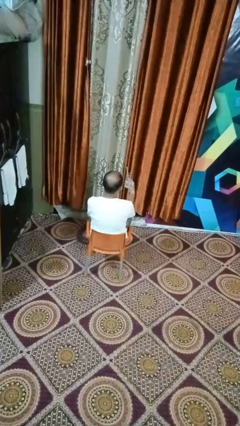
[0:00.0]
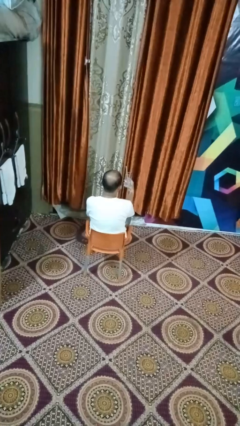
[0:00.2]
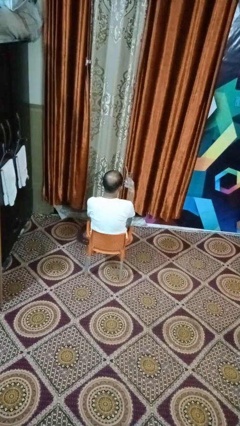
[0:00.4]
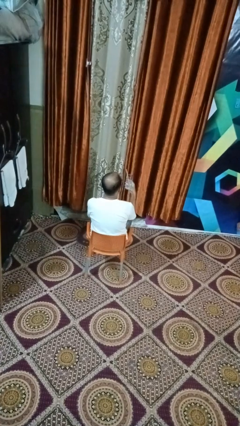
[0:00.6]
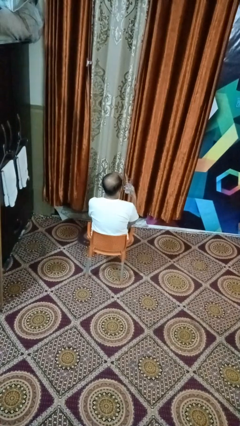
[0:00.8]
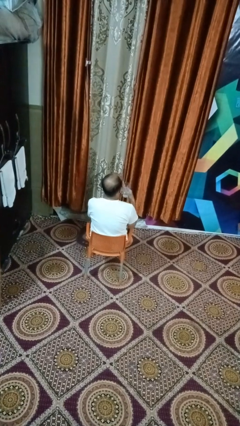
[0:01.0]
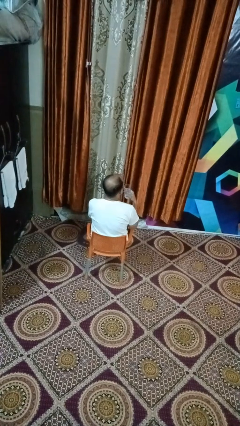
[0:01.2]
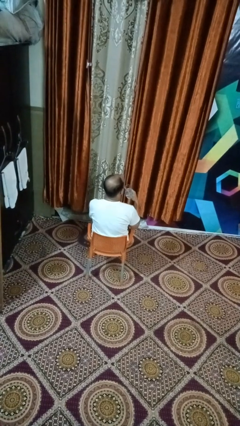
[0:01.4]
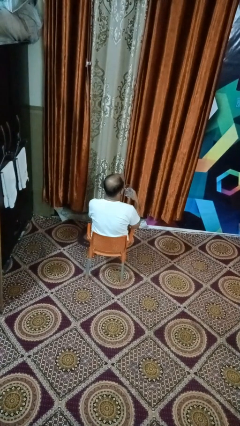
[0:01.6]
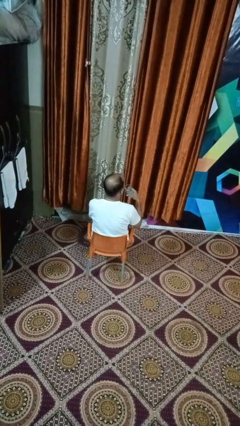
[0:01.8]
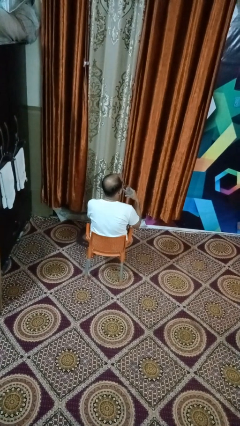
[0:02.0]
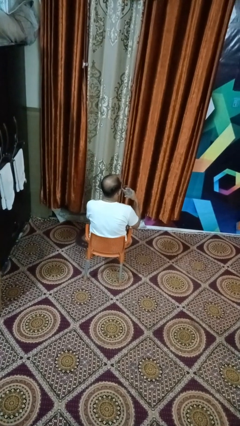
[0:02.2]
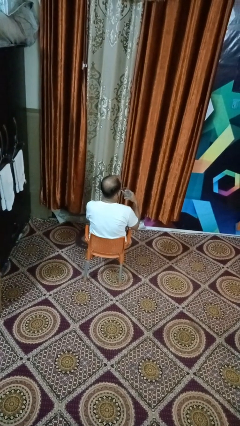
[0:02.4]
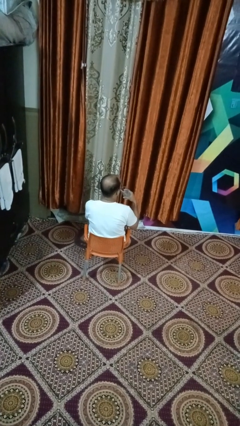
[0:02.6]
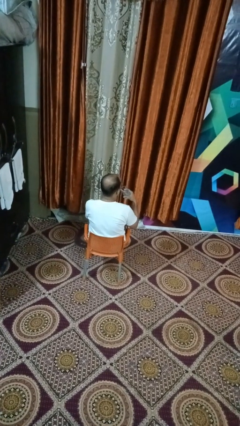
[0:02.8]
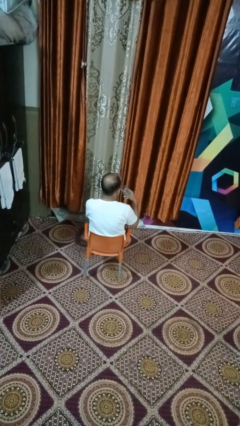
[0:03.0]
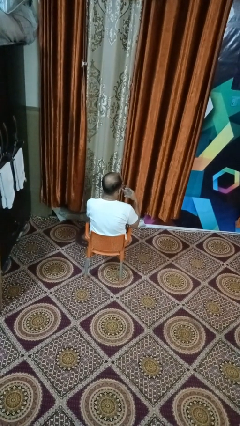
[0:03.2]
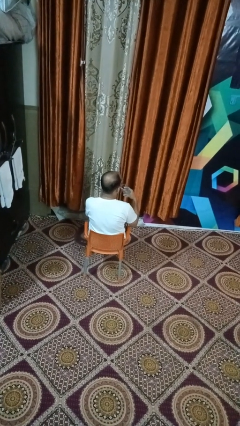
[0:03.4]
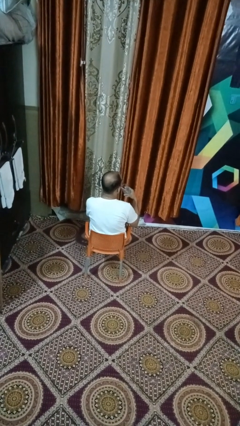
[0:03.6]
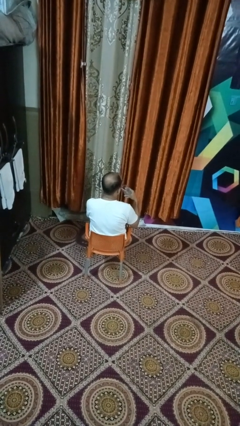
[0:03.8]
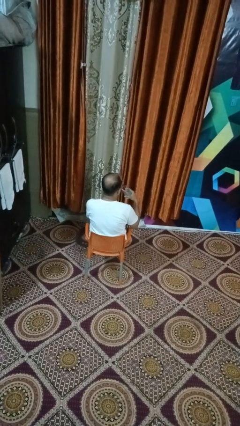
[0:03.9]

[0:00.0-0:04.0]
person drinks from straw

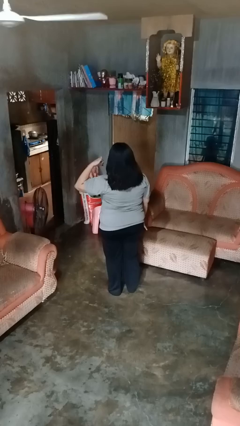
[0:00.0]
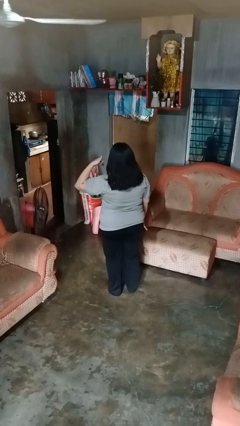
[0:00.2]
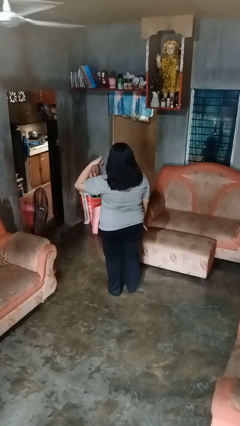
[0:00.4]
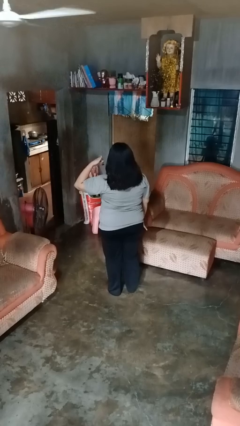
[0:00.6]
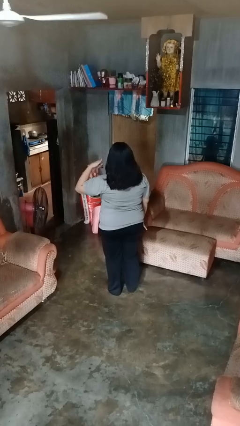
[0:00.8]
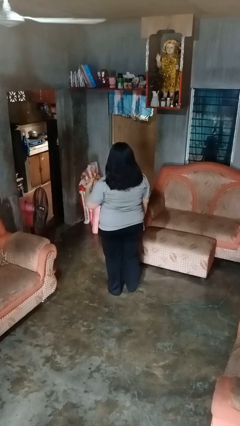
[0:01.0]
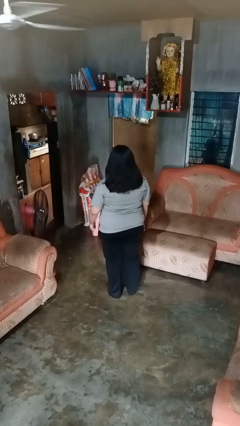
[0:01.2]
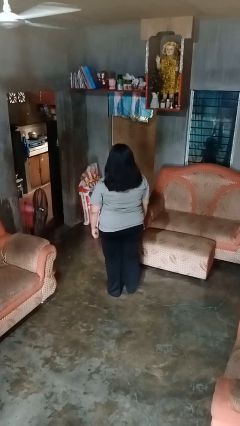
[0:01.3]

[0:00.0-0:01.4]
person gestures call me

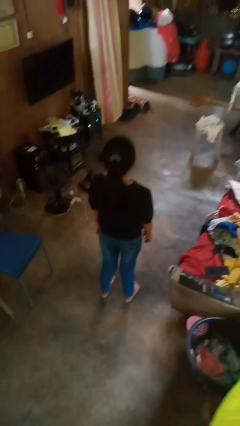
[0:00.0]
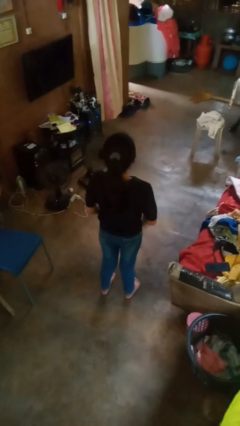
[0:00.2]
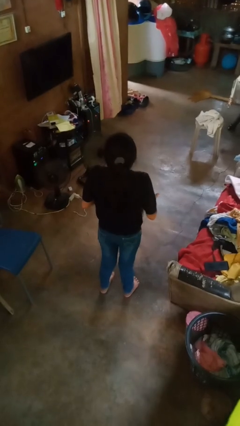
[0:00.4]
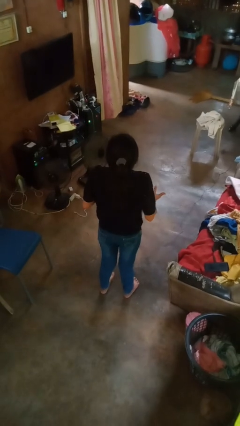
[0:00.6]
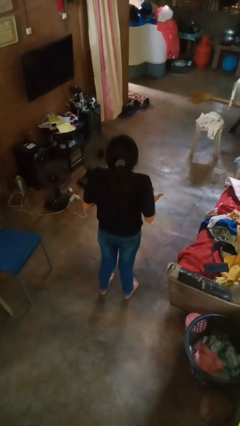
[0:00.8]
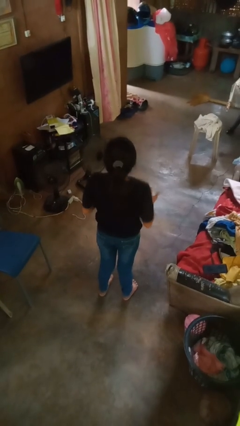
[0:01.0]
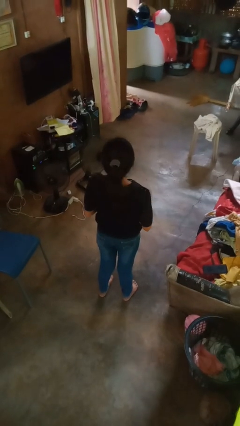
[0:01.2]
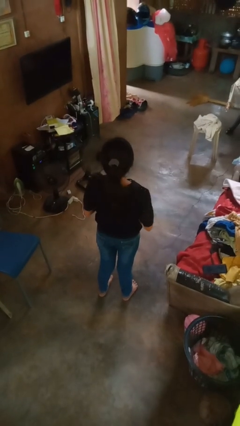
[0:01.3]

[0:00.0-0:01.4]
person shrugs

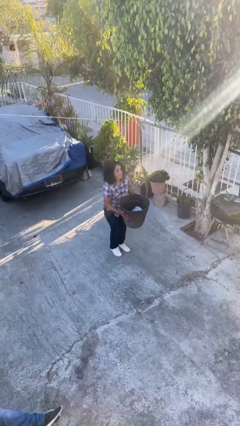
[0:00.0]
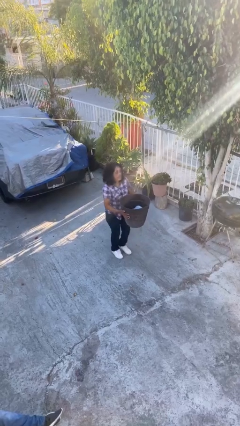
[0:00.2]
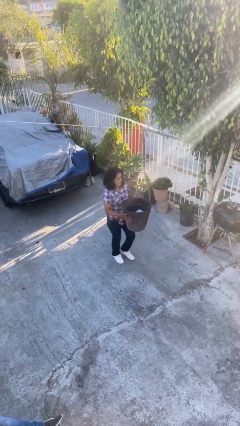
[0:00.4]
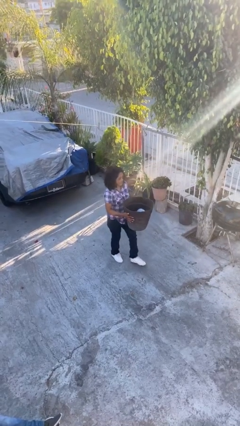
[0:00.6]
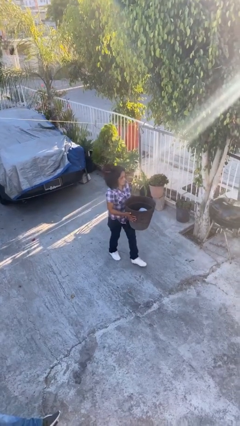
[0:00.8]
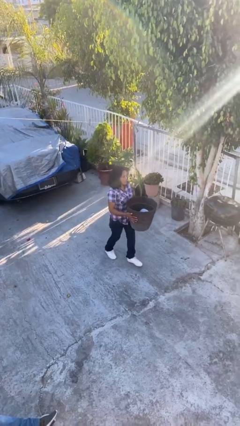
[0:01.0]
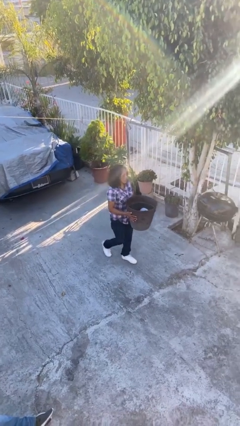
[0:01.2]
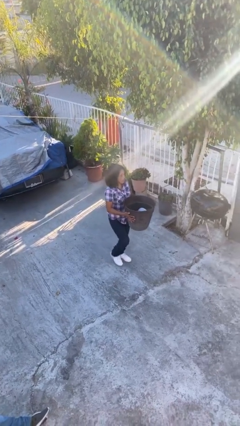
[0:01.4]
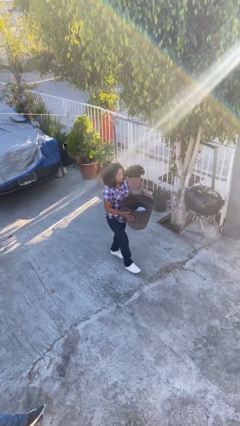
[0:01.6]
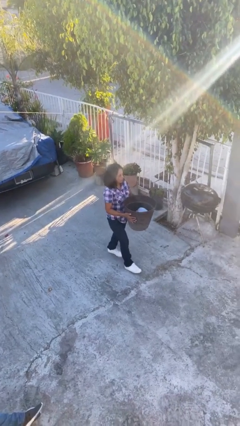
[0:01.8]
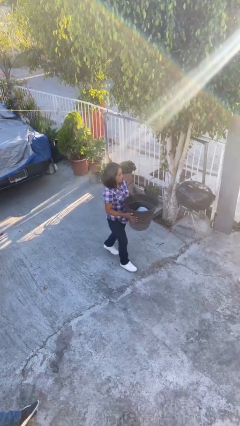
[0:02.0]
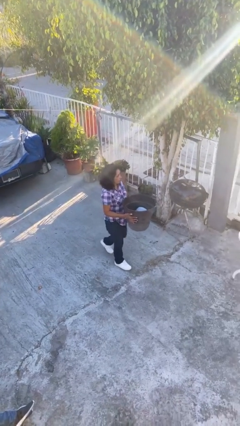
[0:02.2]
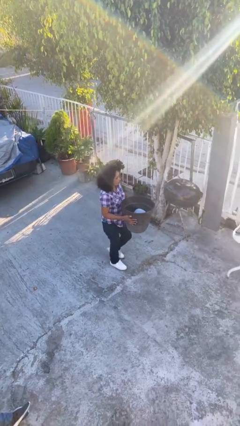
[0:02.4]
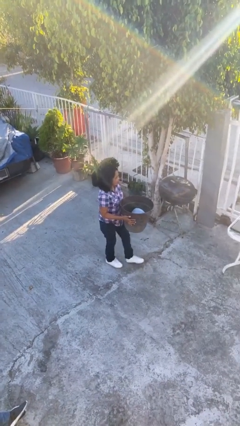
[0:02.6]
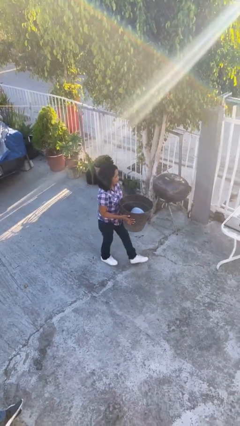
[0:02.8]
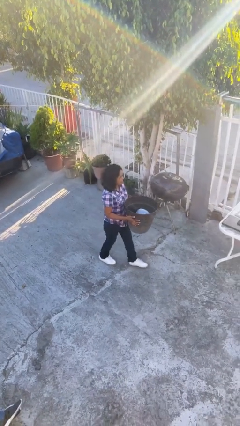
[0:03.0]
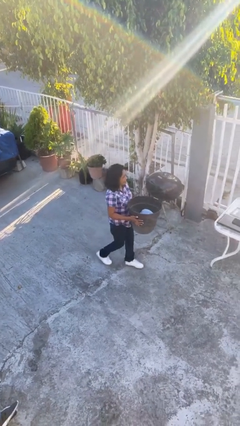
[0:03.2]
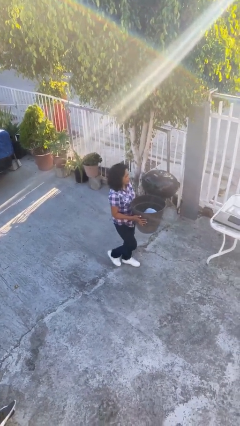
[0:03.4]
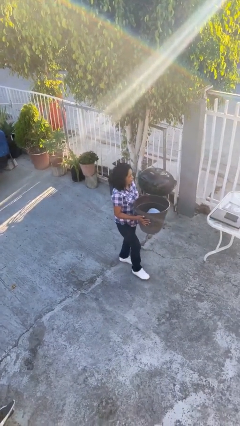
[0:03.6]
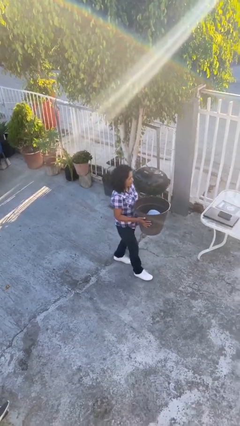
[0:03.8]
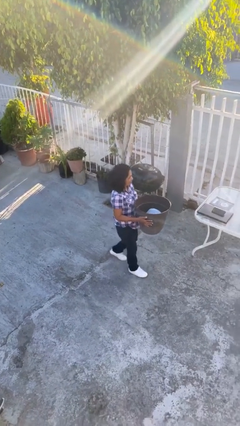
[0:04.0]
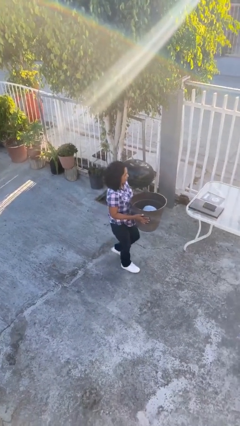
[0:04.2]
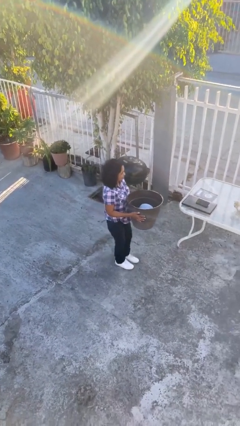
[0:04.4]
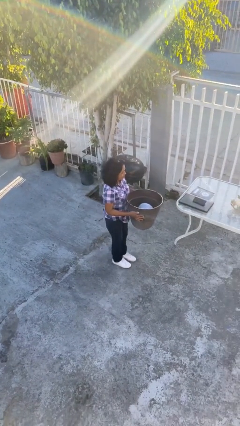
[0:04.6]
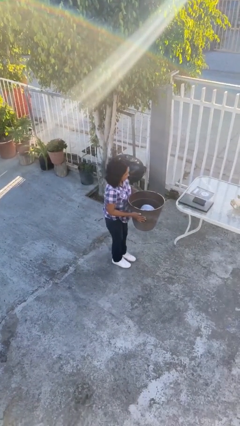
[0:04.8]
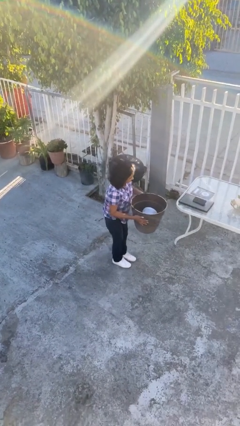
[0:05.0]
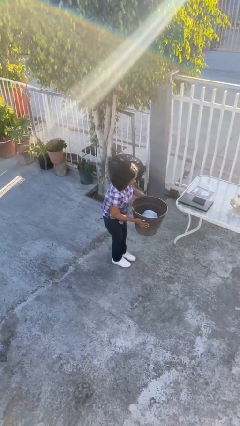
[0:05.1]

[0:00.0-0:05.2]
person carries heavy object

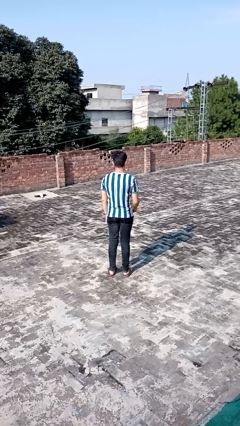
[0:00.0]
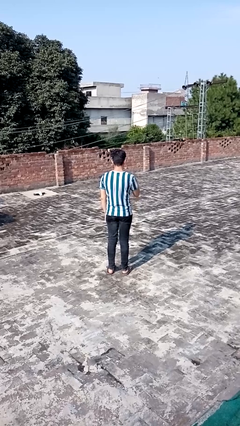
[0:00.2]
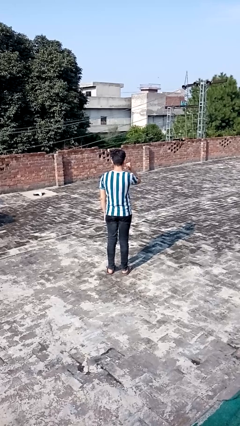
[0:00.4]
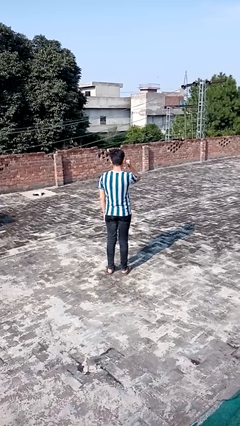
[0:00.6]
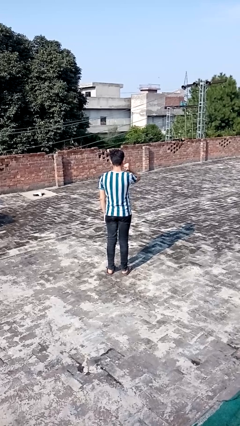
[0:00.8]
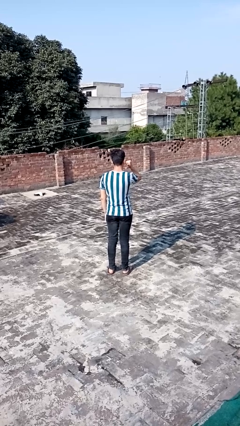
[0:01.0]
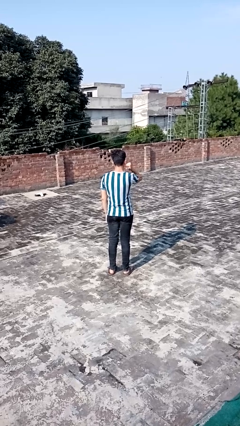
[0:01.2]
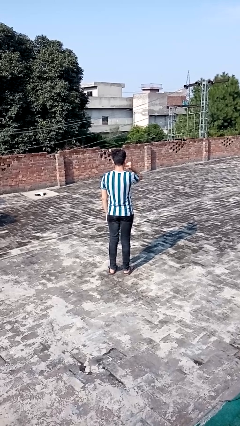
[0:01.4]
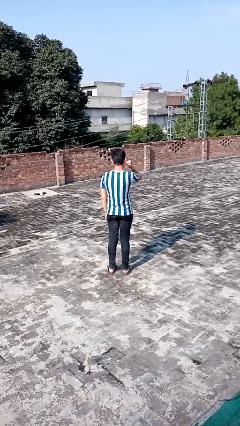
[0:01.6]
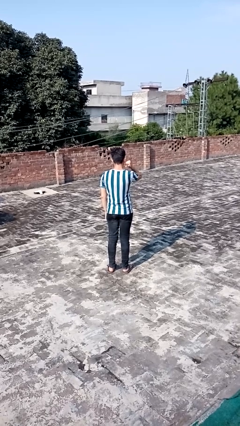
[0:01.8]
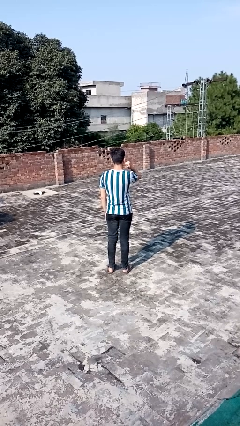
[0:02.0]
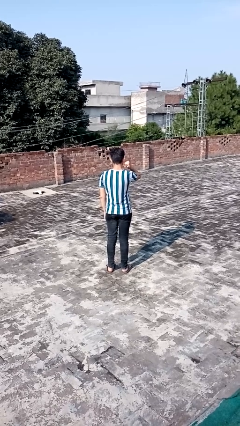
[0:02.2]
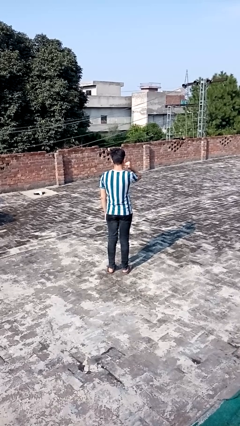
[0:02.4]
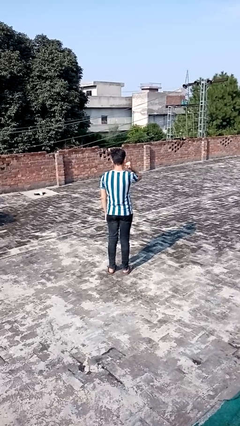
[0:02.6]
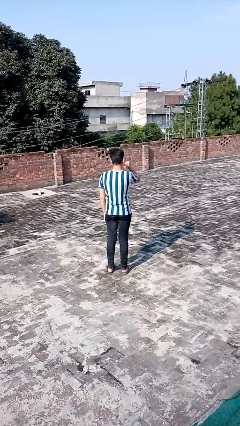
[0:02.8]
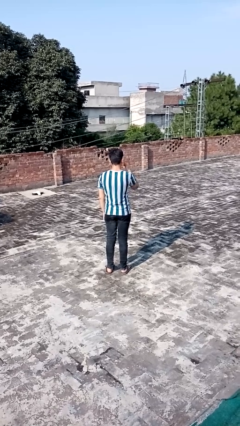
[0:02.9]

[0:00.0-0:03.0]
person gestures behind me

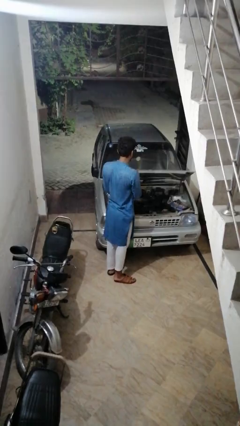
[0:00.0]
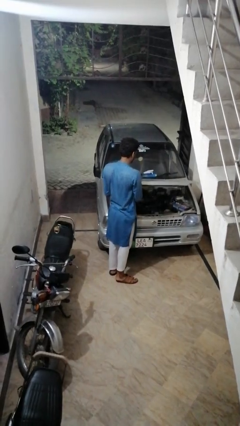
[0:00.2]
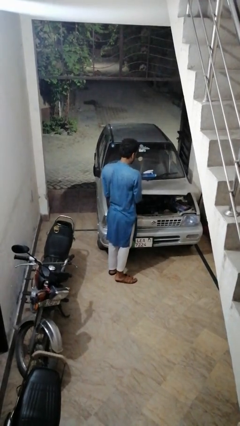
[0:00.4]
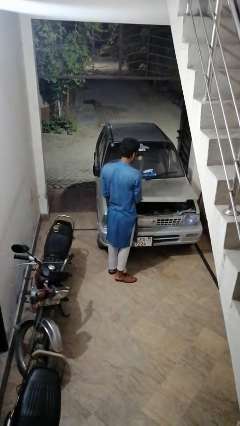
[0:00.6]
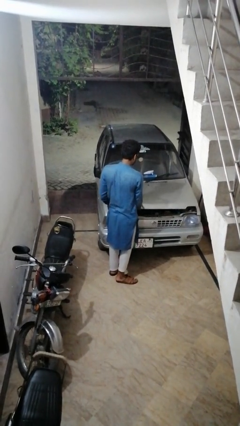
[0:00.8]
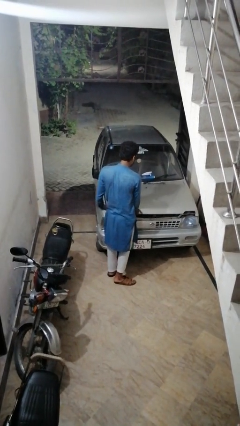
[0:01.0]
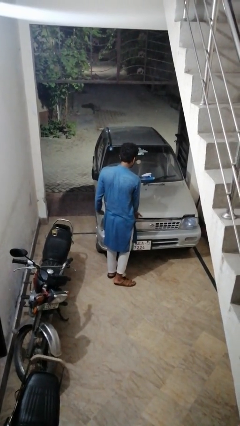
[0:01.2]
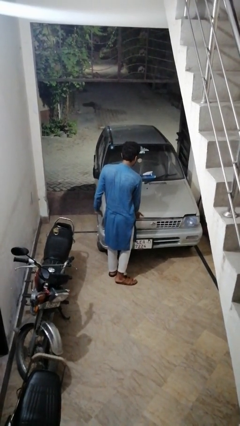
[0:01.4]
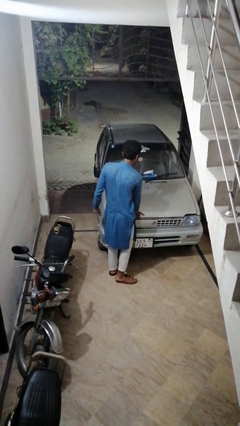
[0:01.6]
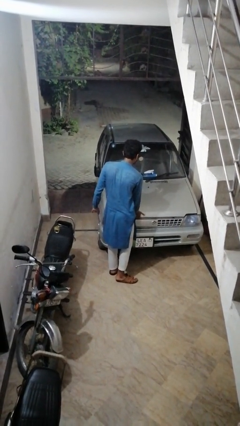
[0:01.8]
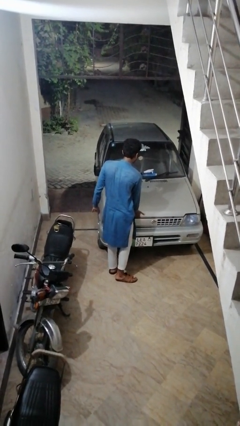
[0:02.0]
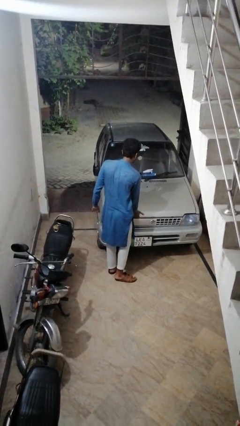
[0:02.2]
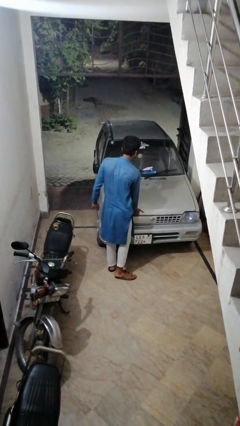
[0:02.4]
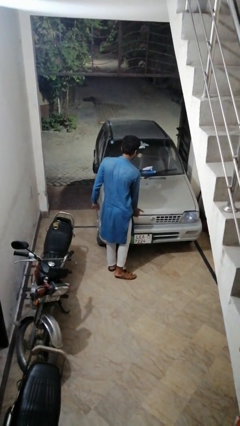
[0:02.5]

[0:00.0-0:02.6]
person closes car hood
